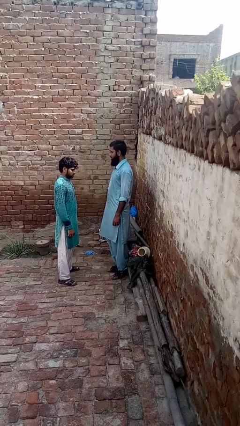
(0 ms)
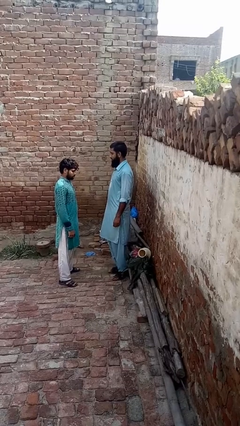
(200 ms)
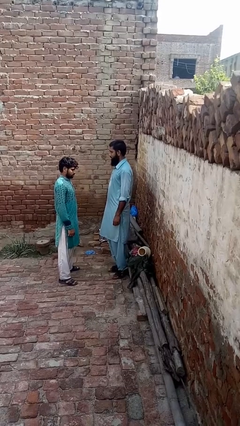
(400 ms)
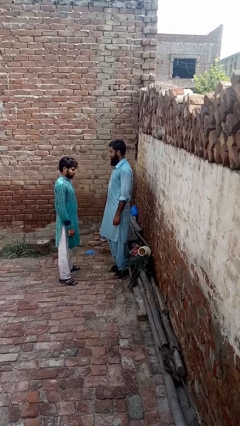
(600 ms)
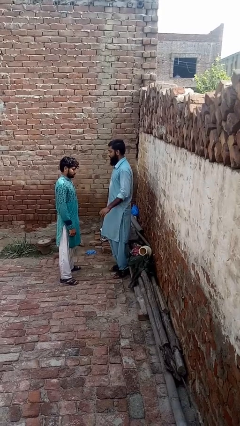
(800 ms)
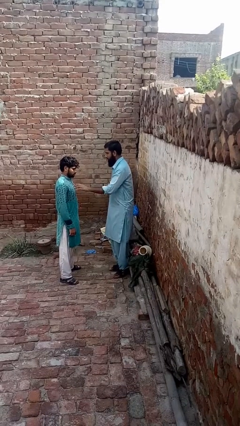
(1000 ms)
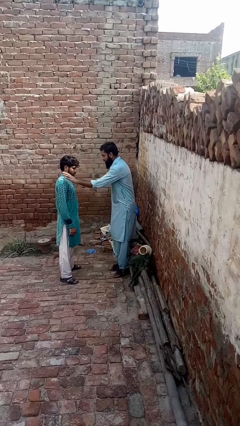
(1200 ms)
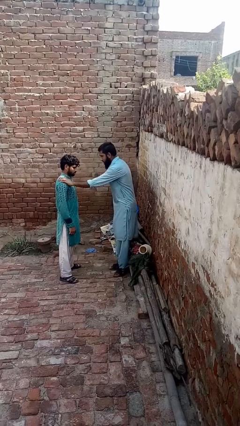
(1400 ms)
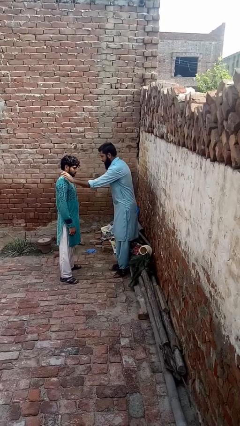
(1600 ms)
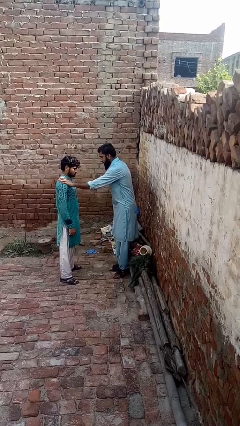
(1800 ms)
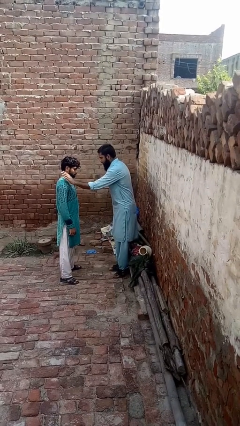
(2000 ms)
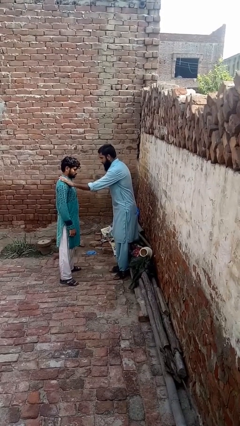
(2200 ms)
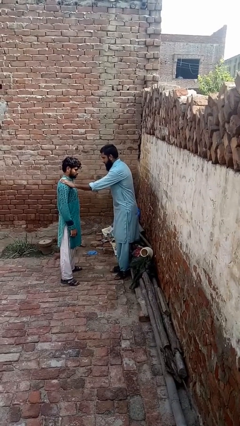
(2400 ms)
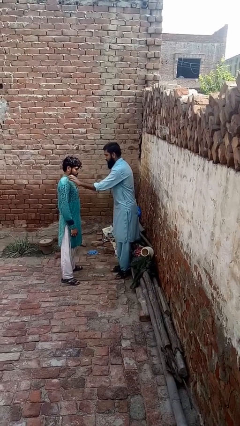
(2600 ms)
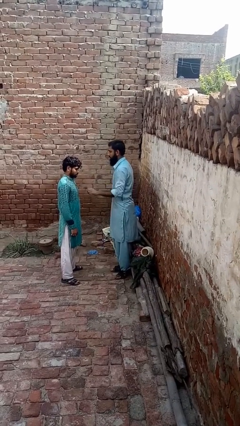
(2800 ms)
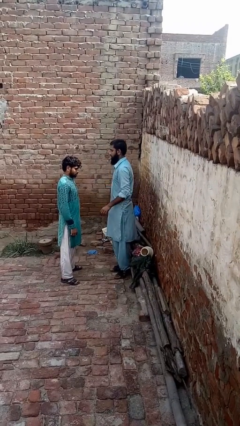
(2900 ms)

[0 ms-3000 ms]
person pounds shoulders of person

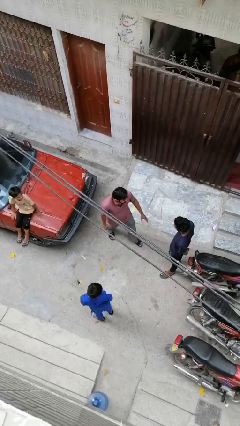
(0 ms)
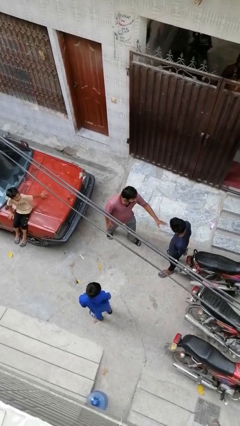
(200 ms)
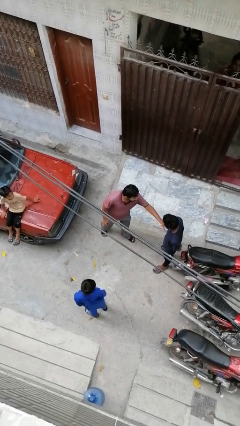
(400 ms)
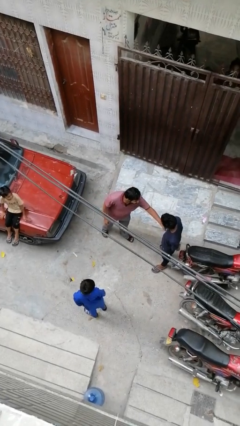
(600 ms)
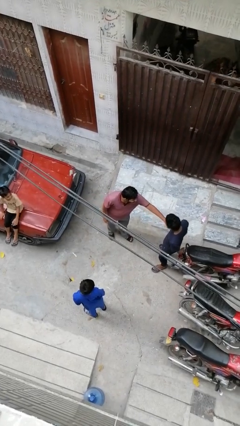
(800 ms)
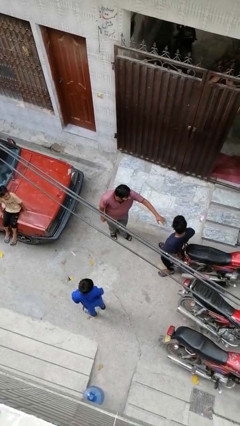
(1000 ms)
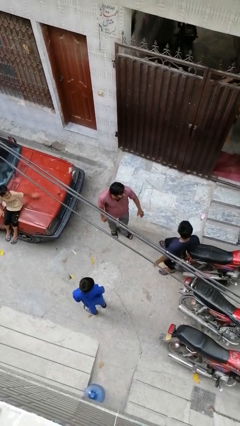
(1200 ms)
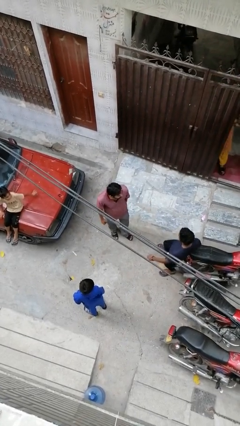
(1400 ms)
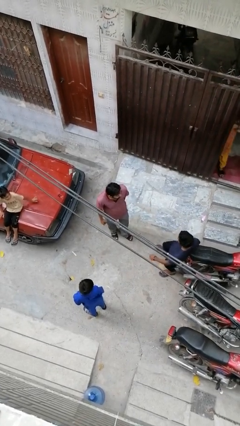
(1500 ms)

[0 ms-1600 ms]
person shoves person

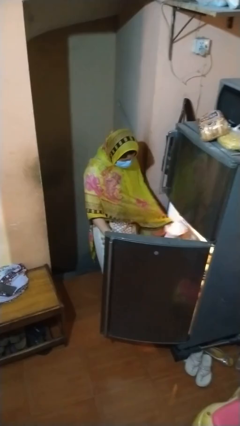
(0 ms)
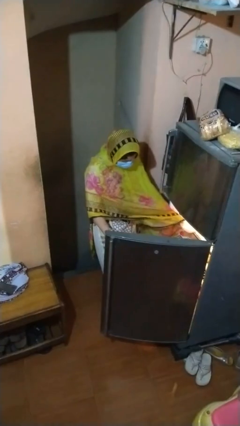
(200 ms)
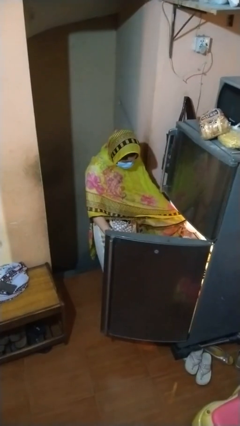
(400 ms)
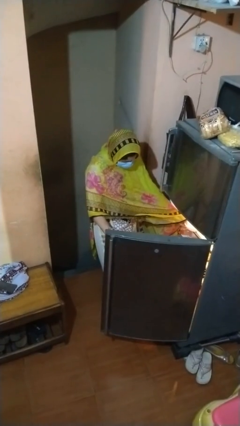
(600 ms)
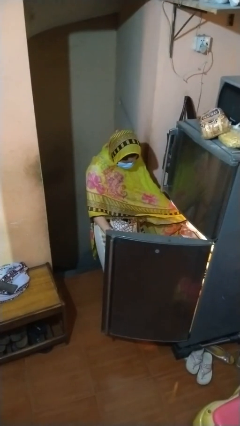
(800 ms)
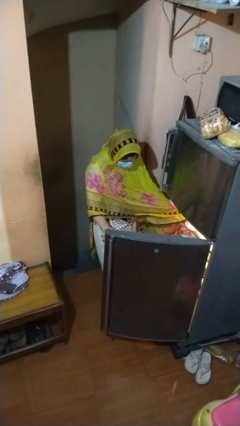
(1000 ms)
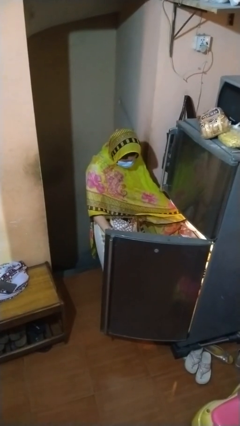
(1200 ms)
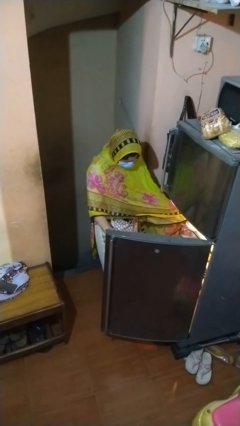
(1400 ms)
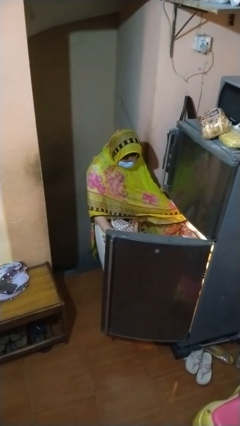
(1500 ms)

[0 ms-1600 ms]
person puts object into refrigerator

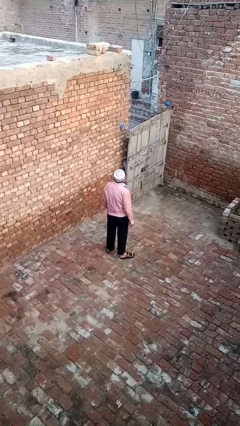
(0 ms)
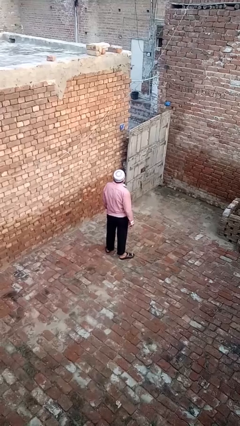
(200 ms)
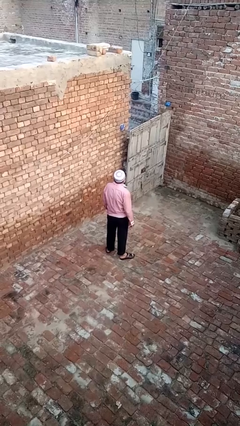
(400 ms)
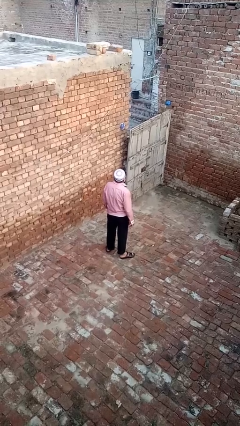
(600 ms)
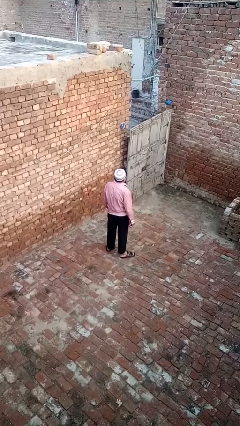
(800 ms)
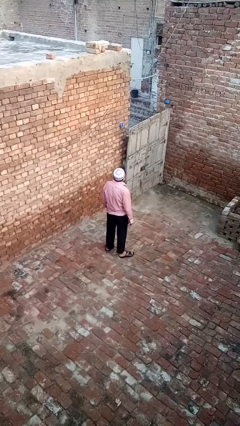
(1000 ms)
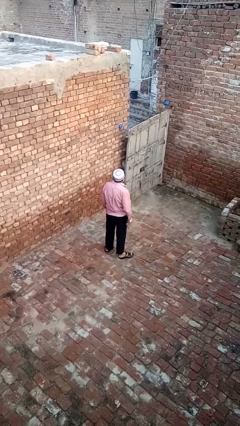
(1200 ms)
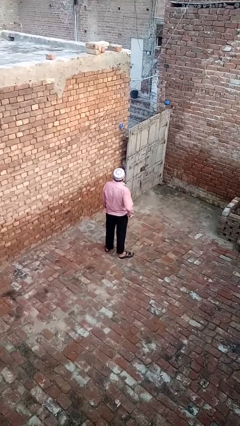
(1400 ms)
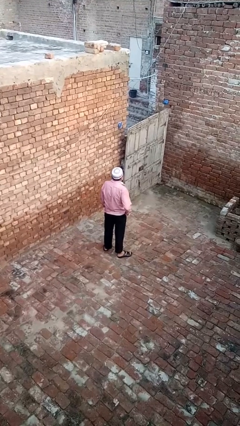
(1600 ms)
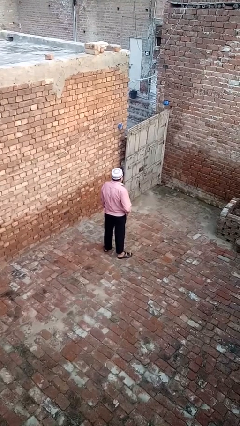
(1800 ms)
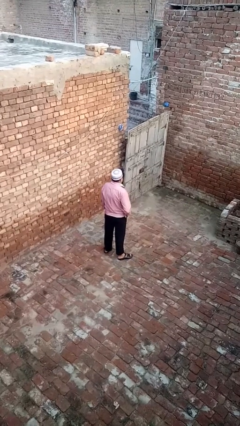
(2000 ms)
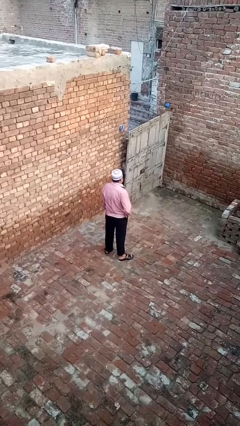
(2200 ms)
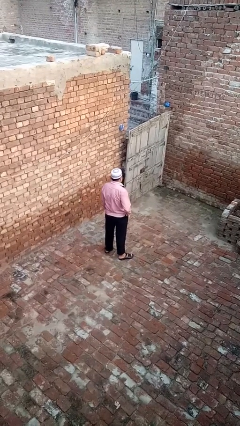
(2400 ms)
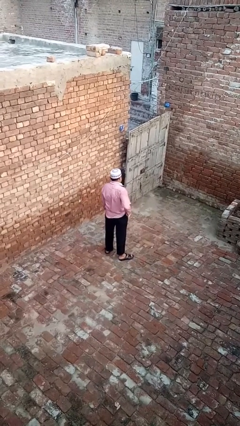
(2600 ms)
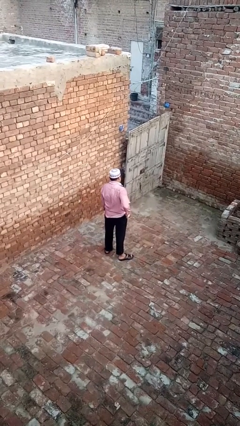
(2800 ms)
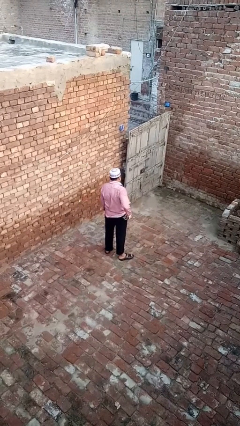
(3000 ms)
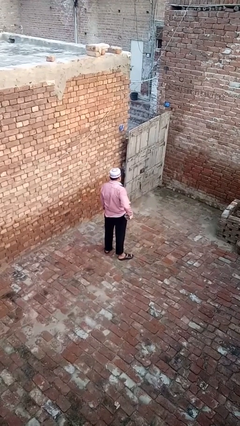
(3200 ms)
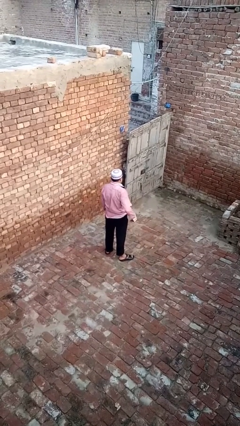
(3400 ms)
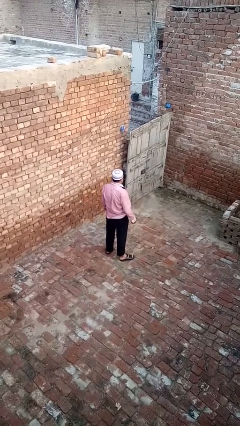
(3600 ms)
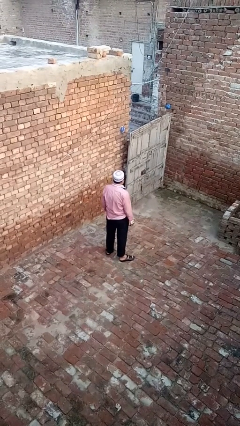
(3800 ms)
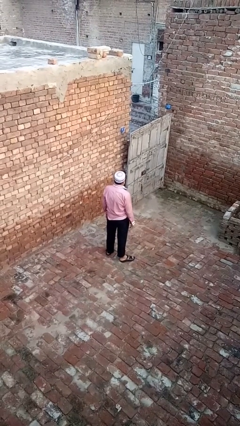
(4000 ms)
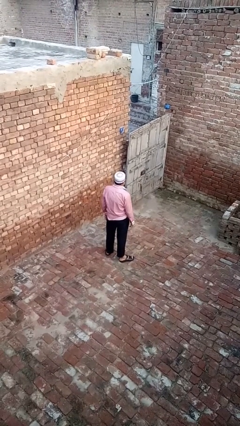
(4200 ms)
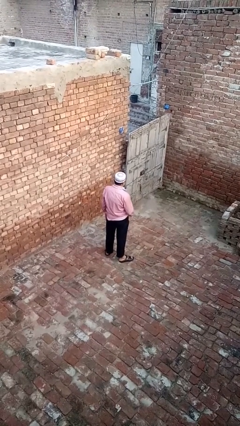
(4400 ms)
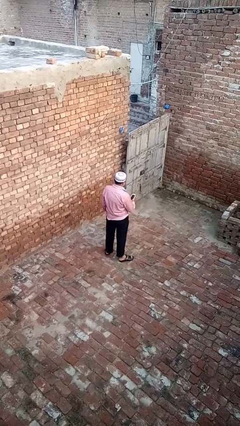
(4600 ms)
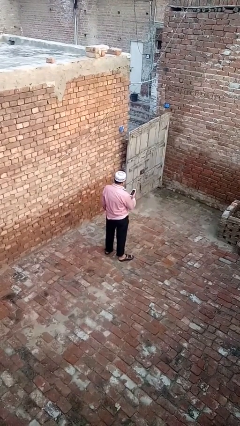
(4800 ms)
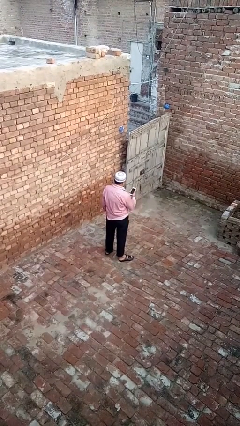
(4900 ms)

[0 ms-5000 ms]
person takes phone from pocket

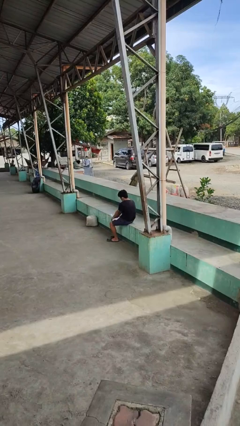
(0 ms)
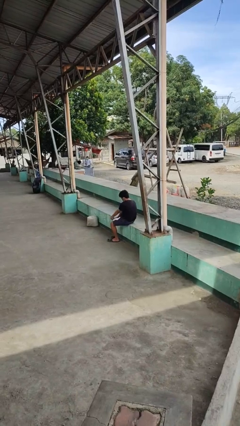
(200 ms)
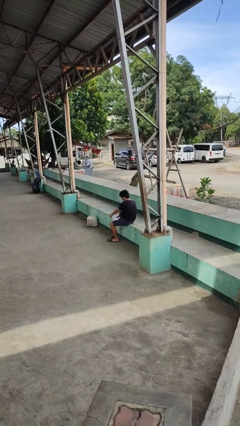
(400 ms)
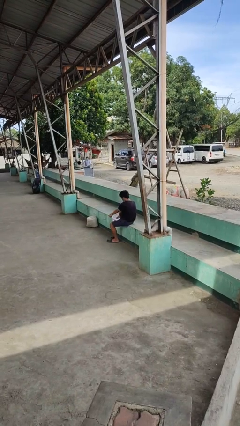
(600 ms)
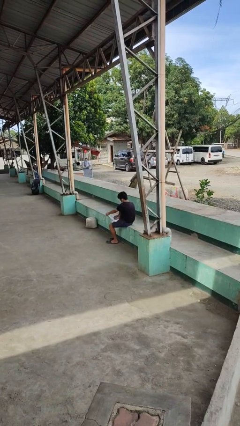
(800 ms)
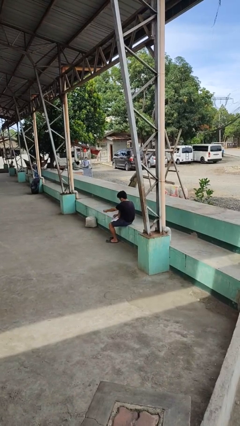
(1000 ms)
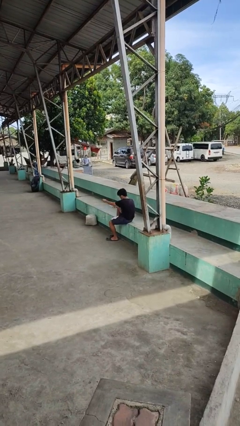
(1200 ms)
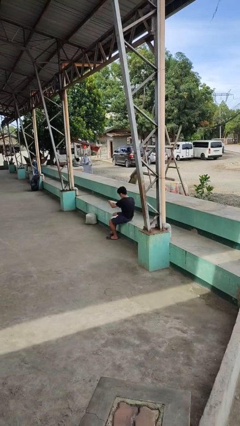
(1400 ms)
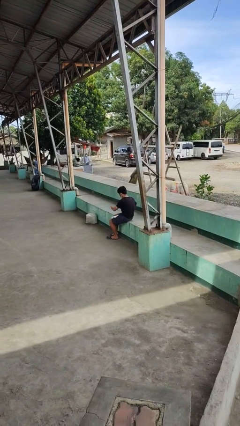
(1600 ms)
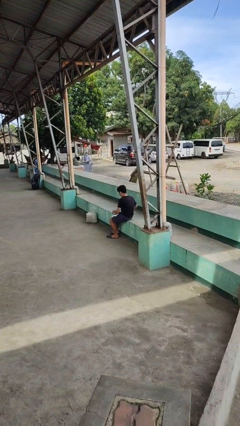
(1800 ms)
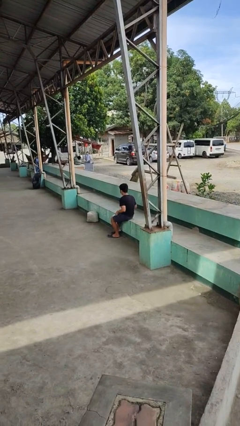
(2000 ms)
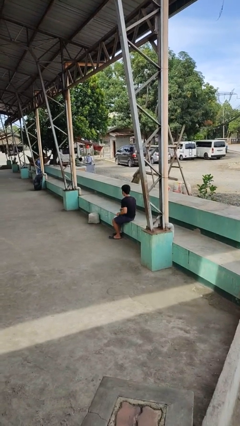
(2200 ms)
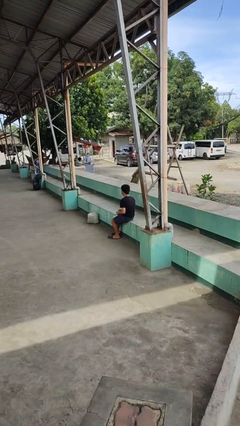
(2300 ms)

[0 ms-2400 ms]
person takes off socks

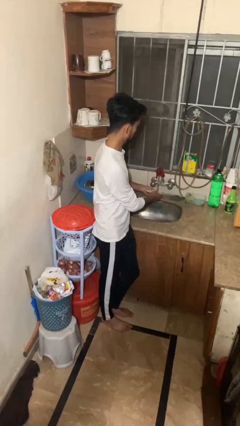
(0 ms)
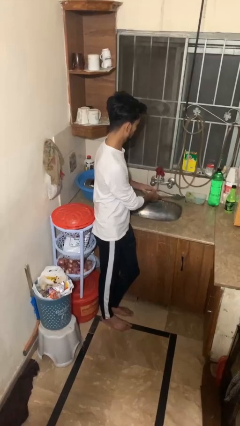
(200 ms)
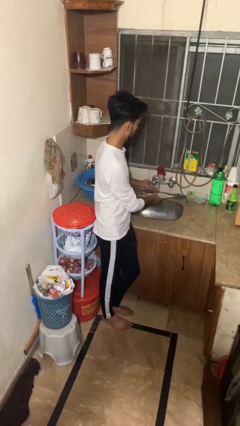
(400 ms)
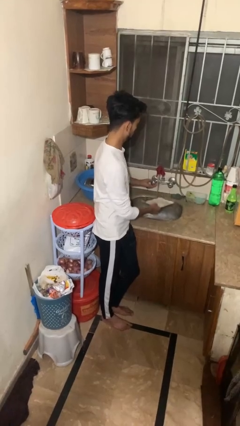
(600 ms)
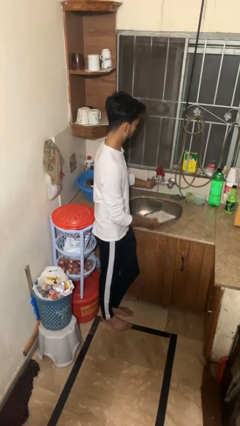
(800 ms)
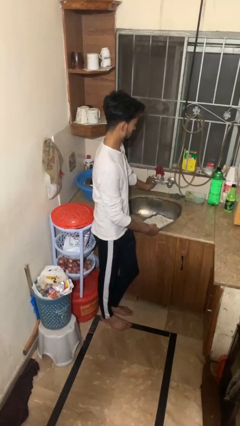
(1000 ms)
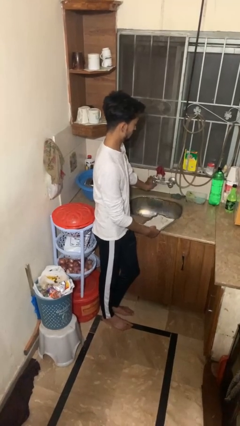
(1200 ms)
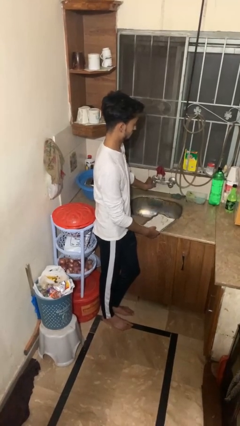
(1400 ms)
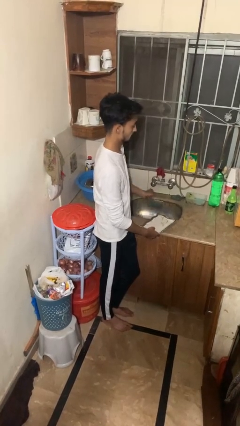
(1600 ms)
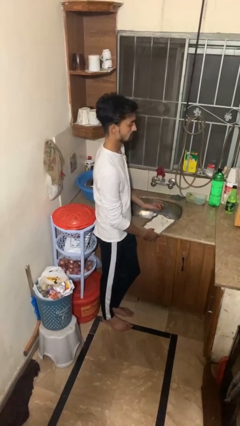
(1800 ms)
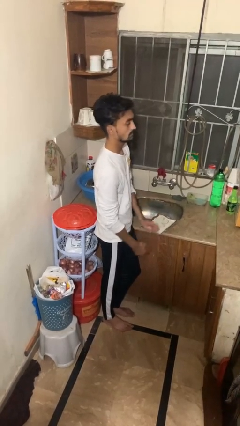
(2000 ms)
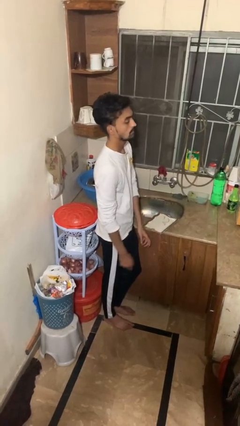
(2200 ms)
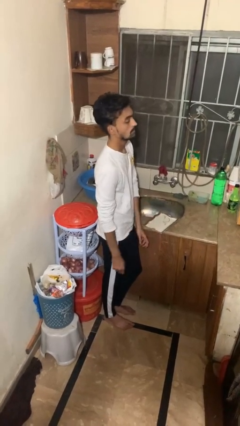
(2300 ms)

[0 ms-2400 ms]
person closes dishwasher

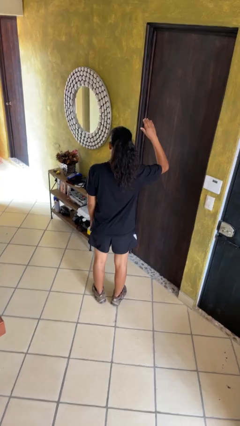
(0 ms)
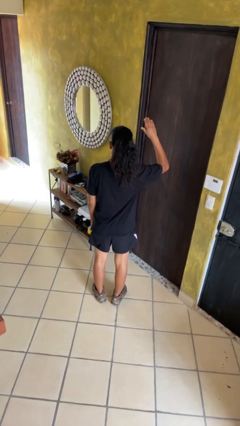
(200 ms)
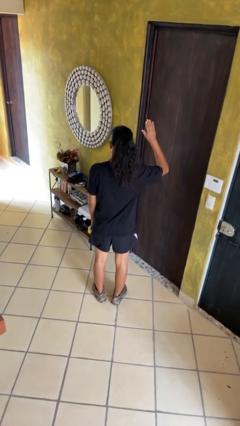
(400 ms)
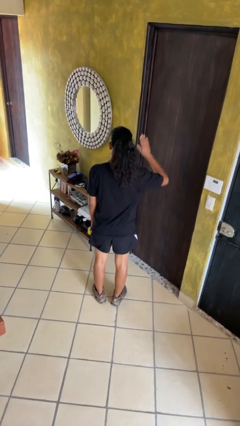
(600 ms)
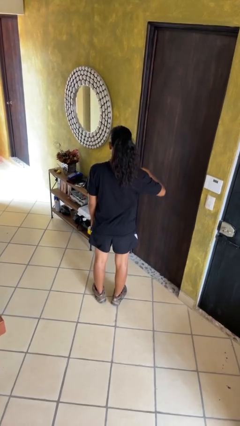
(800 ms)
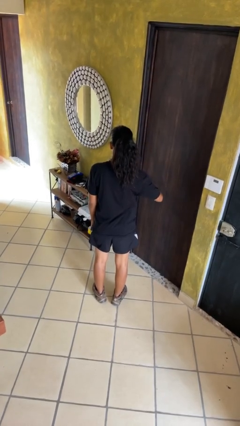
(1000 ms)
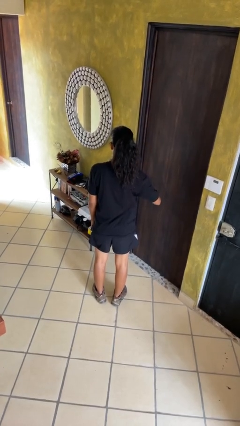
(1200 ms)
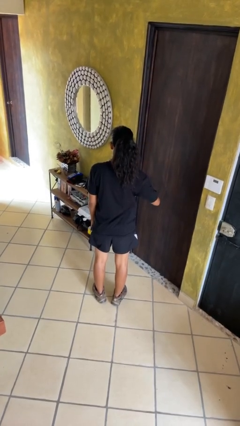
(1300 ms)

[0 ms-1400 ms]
person gestures swipe down
